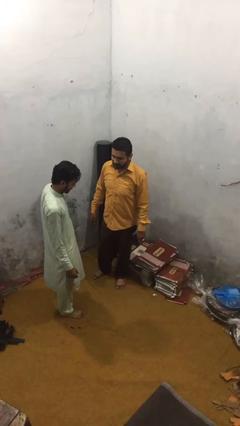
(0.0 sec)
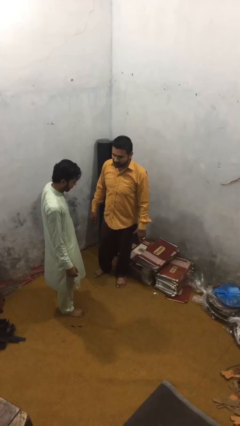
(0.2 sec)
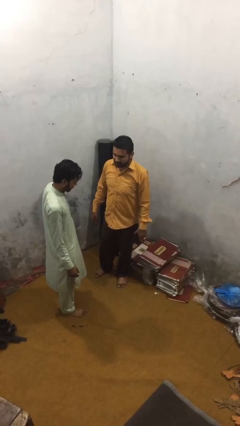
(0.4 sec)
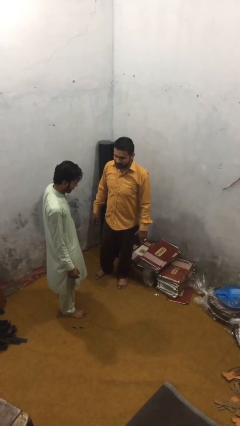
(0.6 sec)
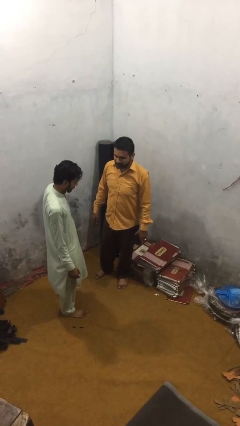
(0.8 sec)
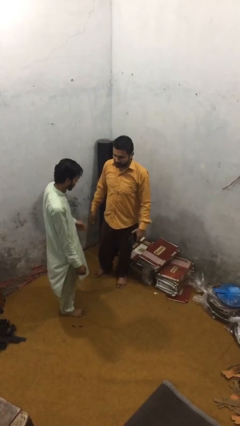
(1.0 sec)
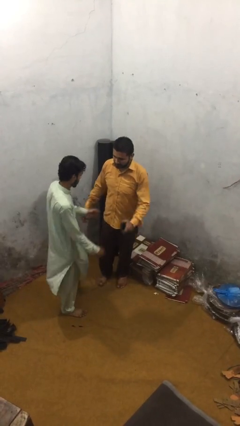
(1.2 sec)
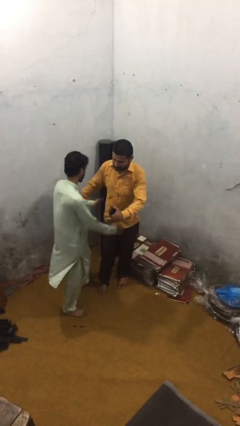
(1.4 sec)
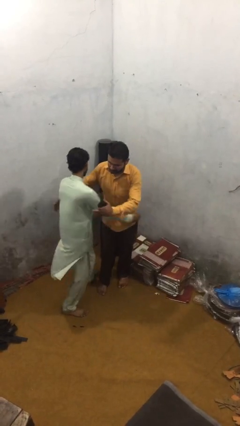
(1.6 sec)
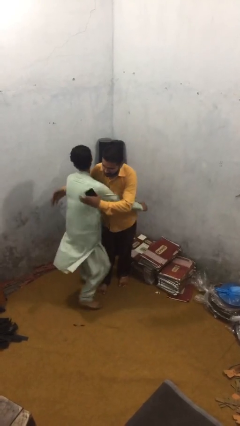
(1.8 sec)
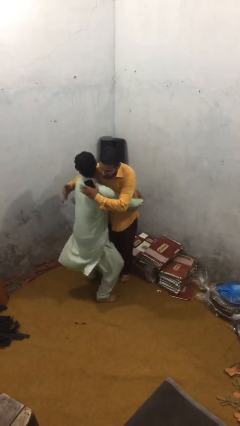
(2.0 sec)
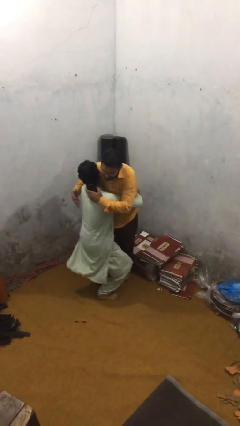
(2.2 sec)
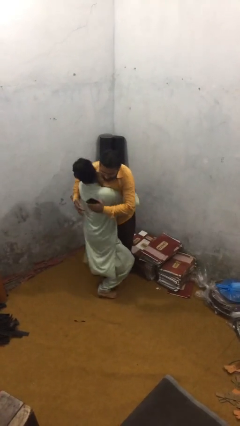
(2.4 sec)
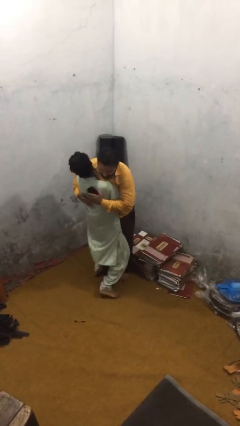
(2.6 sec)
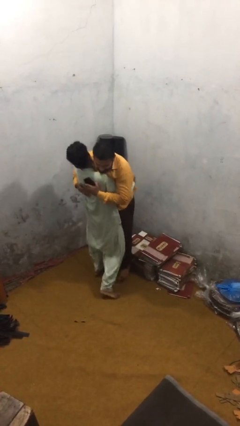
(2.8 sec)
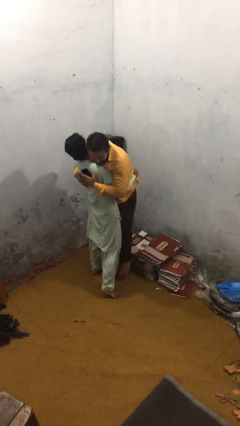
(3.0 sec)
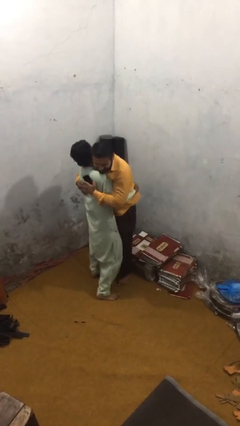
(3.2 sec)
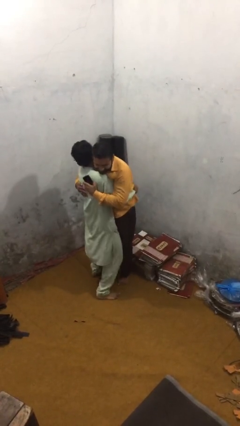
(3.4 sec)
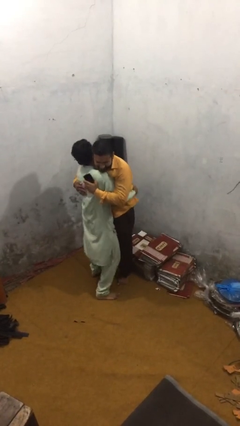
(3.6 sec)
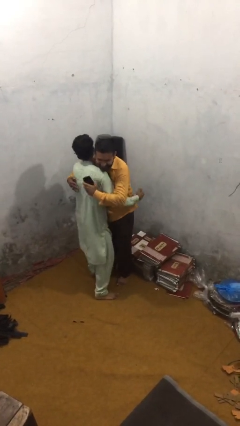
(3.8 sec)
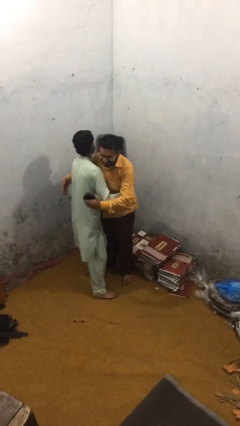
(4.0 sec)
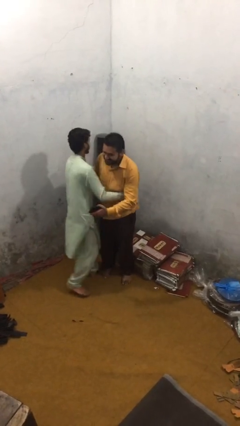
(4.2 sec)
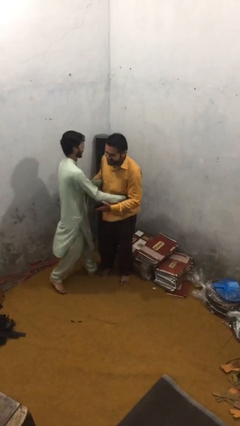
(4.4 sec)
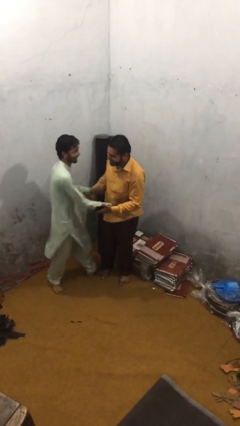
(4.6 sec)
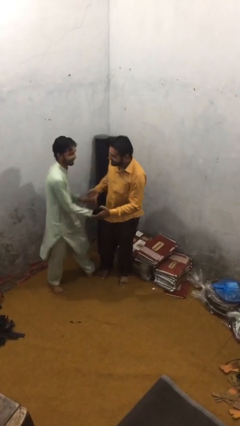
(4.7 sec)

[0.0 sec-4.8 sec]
person embraces person

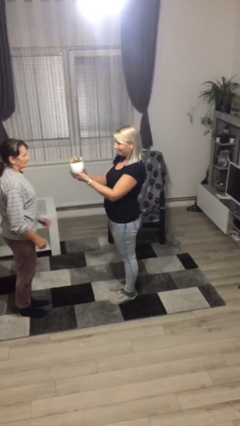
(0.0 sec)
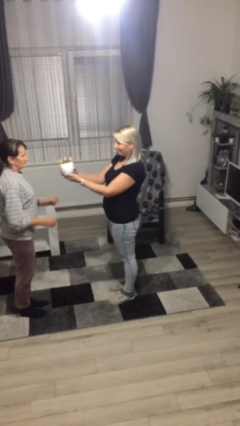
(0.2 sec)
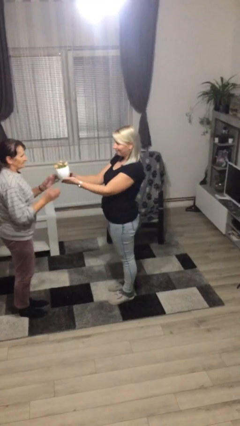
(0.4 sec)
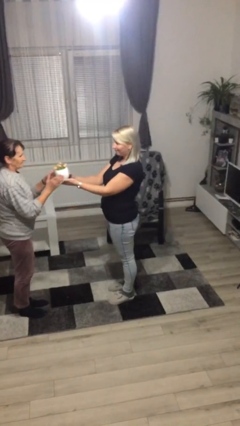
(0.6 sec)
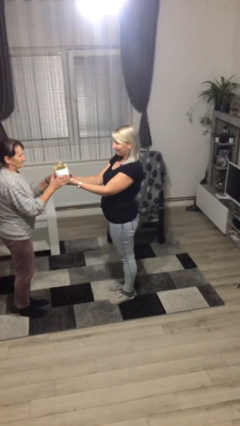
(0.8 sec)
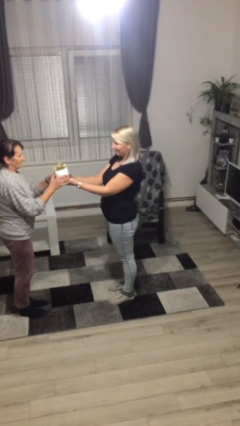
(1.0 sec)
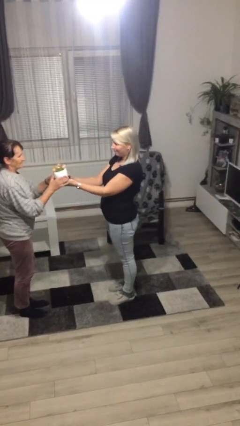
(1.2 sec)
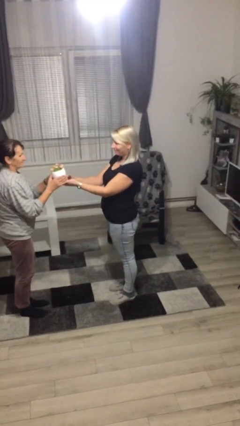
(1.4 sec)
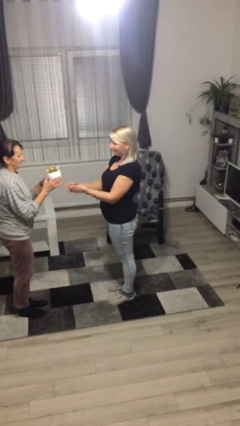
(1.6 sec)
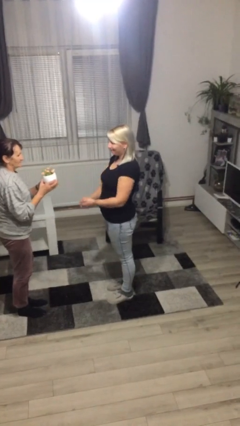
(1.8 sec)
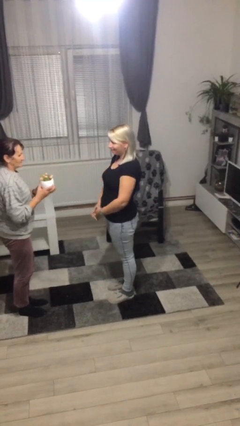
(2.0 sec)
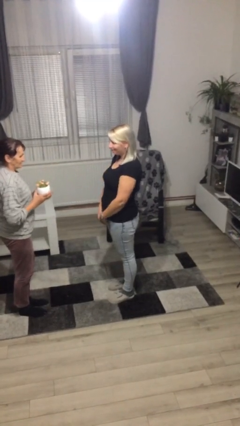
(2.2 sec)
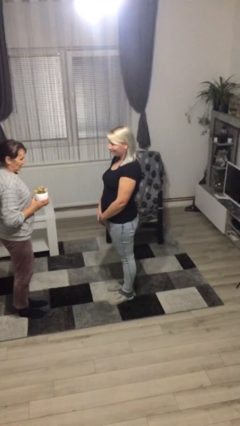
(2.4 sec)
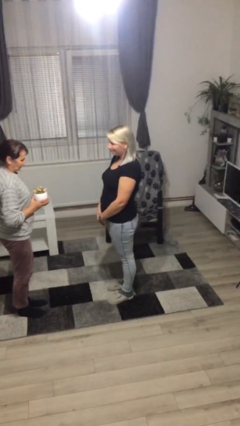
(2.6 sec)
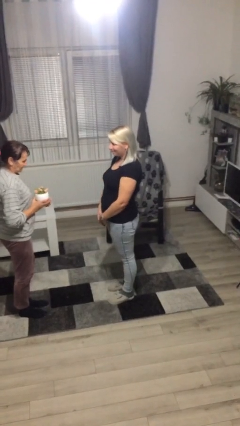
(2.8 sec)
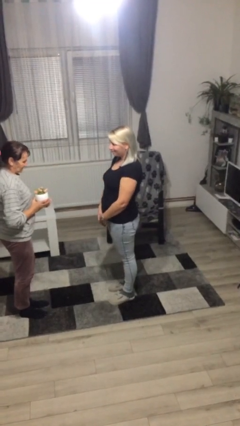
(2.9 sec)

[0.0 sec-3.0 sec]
person transfers object to person

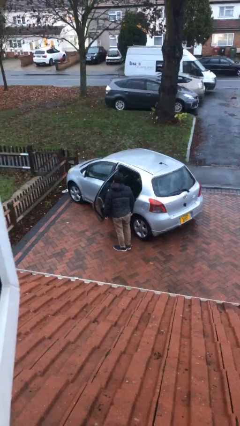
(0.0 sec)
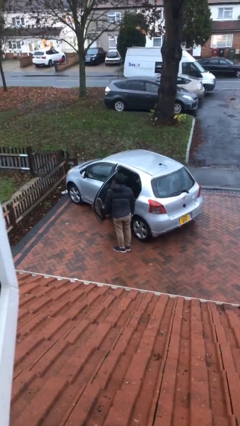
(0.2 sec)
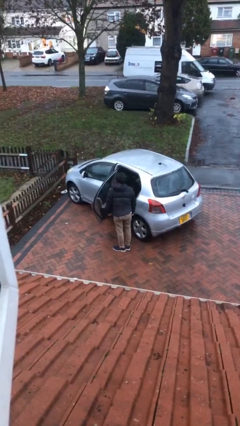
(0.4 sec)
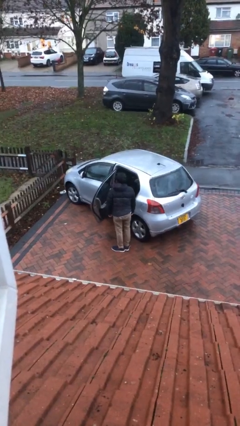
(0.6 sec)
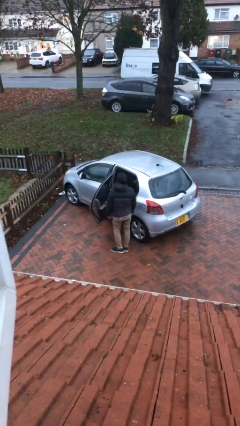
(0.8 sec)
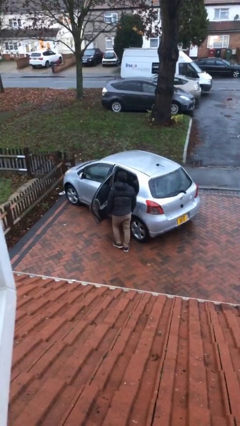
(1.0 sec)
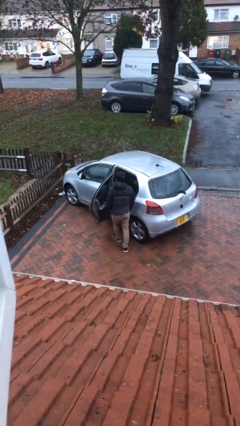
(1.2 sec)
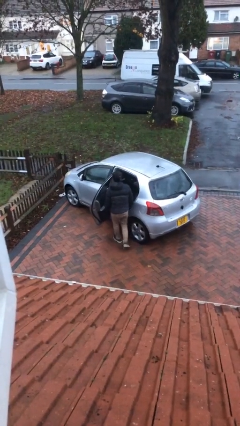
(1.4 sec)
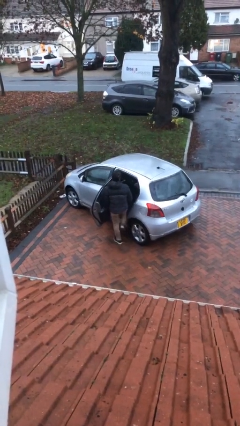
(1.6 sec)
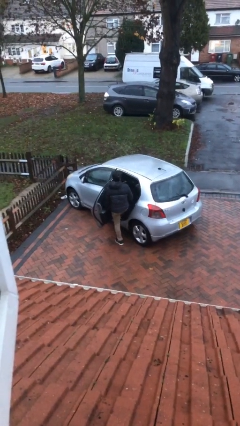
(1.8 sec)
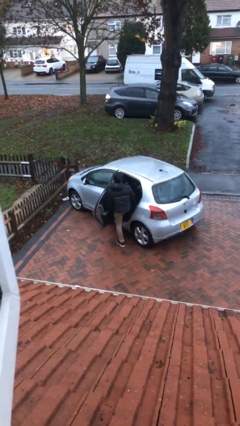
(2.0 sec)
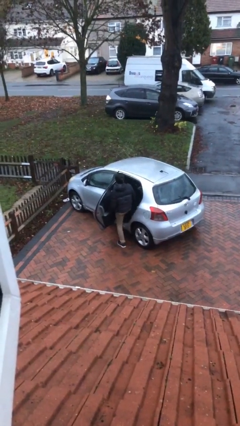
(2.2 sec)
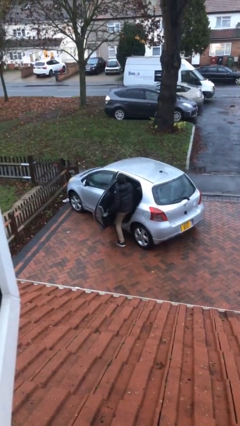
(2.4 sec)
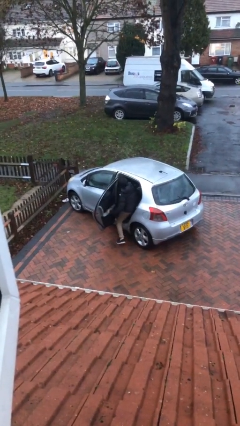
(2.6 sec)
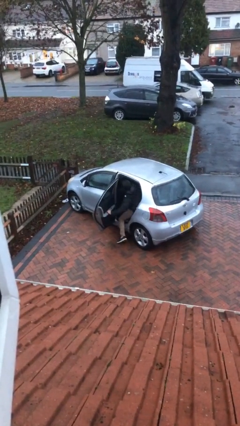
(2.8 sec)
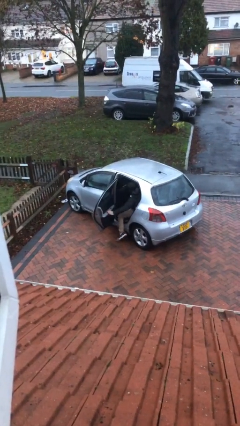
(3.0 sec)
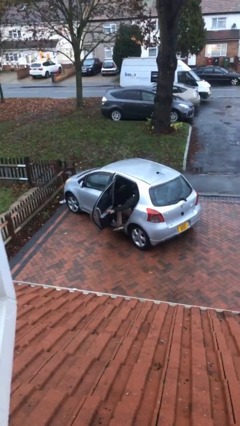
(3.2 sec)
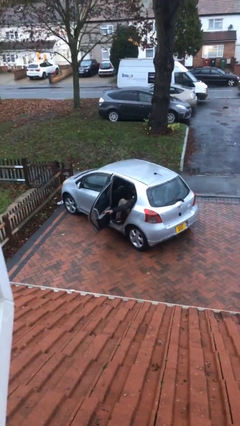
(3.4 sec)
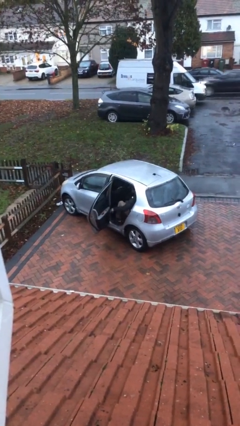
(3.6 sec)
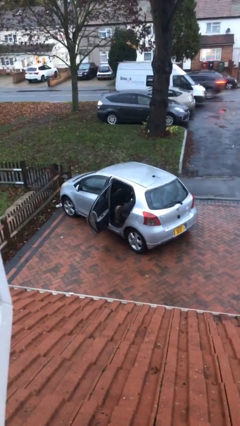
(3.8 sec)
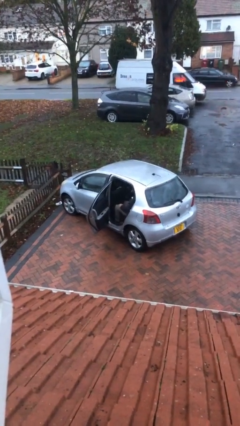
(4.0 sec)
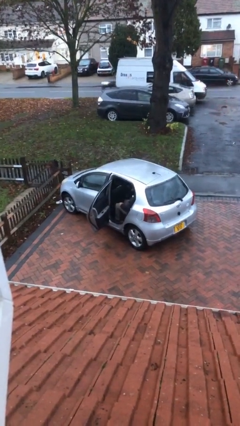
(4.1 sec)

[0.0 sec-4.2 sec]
person enters car

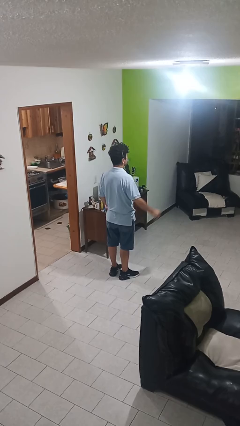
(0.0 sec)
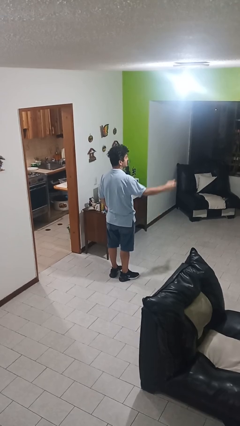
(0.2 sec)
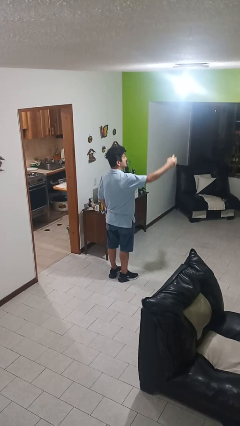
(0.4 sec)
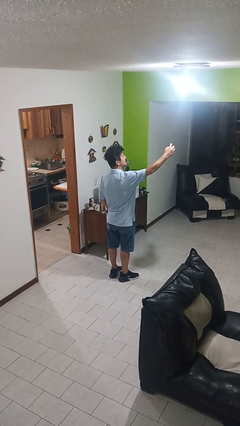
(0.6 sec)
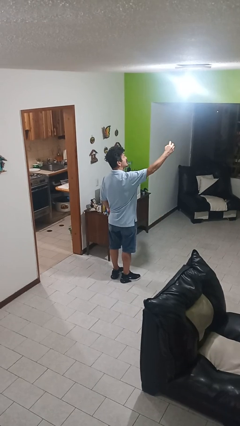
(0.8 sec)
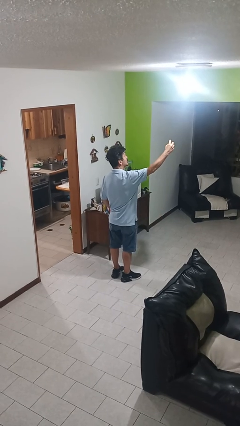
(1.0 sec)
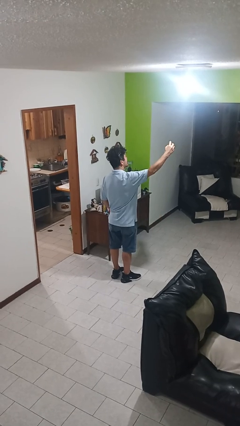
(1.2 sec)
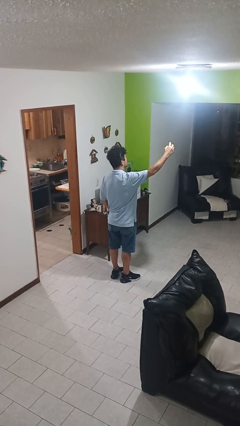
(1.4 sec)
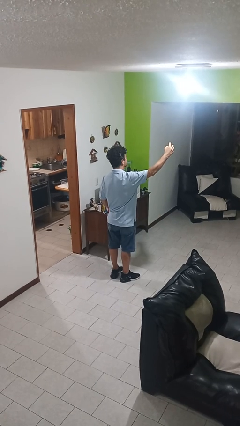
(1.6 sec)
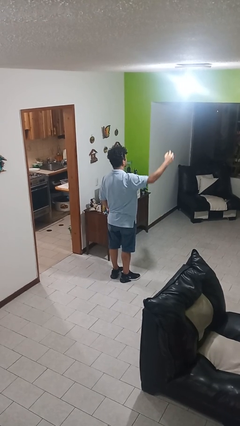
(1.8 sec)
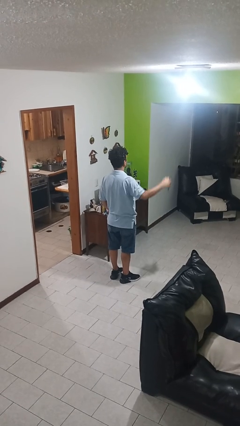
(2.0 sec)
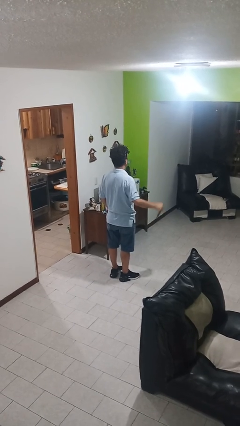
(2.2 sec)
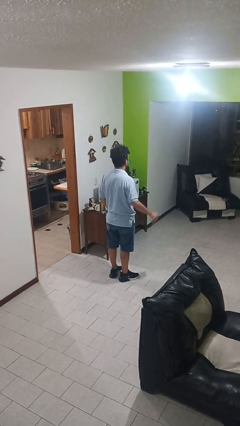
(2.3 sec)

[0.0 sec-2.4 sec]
person takes selfie

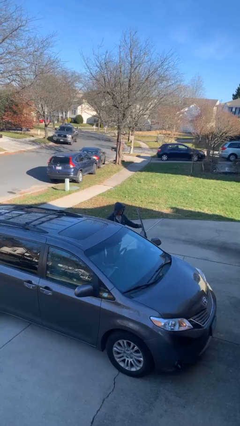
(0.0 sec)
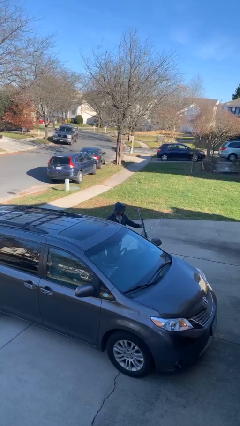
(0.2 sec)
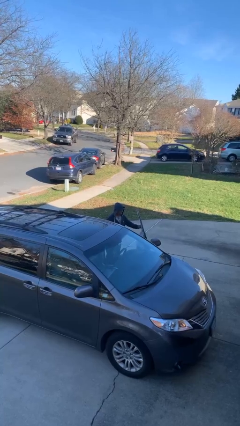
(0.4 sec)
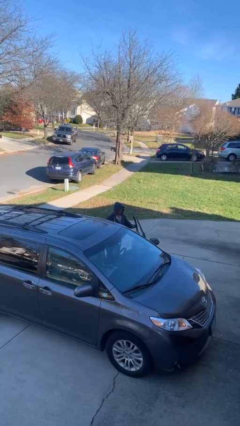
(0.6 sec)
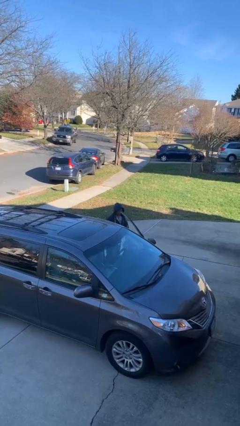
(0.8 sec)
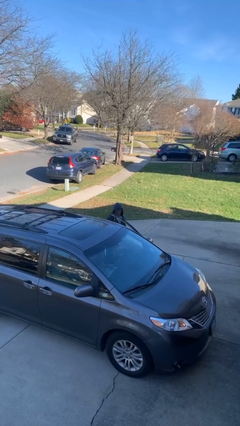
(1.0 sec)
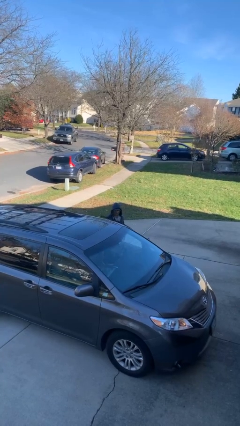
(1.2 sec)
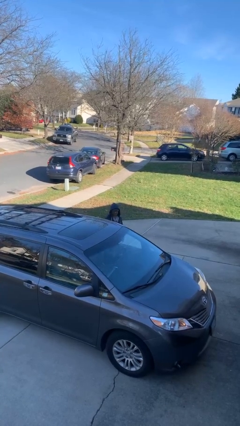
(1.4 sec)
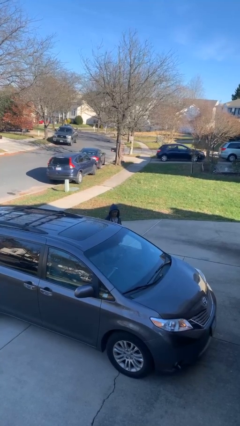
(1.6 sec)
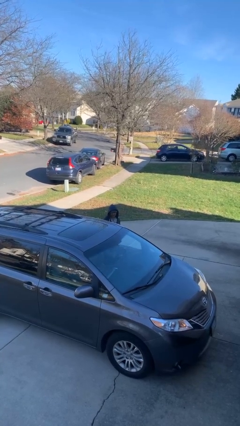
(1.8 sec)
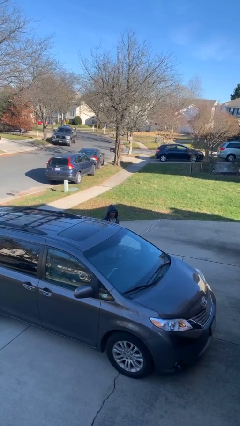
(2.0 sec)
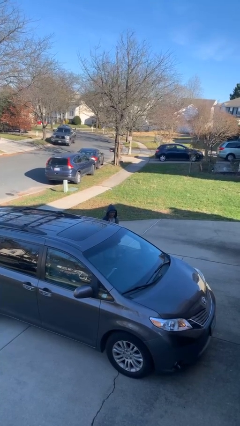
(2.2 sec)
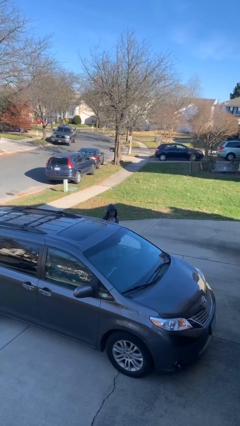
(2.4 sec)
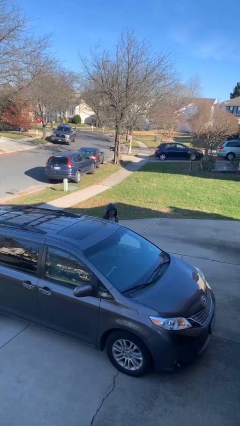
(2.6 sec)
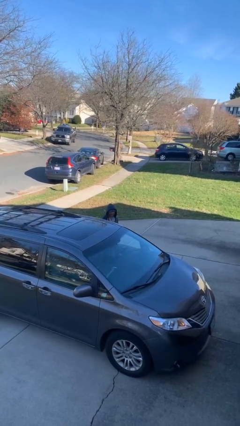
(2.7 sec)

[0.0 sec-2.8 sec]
person closes car door

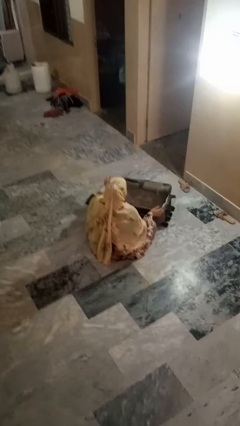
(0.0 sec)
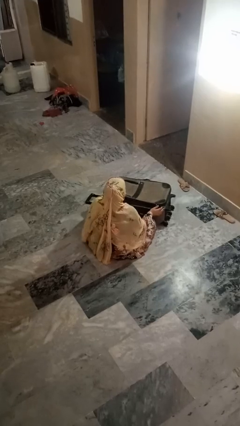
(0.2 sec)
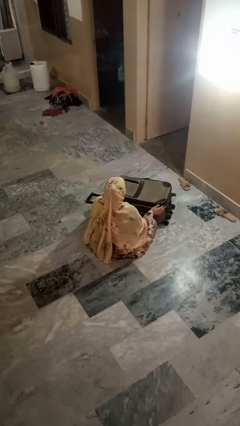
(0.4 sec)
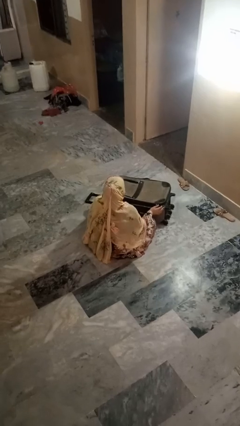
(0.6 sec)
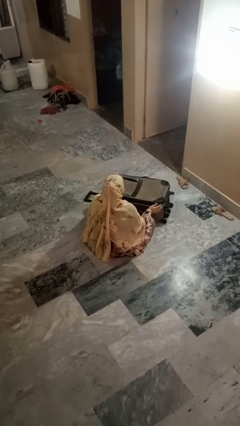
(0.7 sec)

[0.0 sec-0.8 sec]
person closes suitcase
